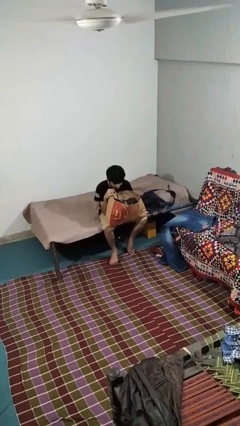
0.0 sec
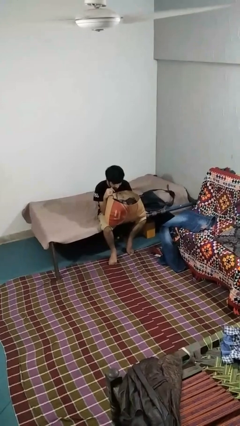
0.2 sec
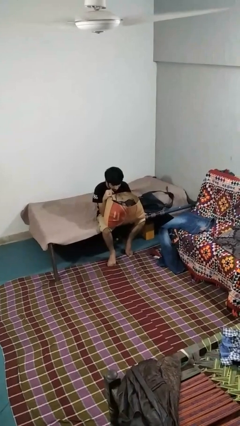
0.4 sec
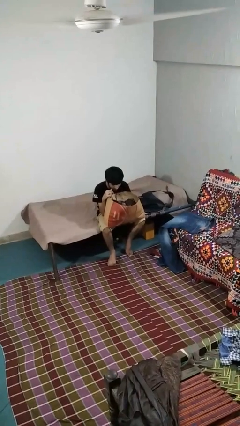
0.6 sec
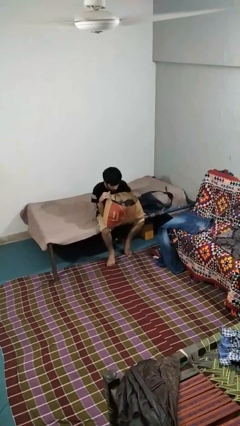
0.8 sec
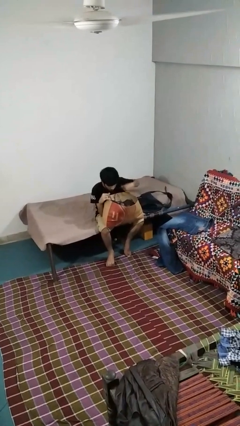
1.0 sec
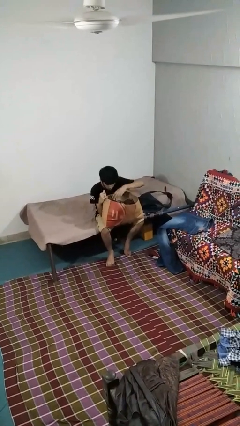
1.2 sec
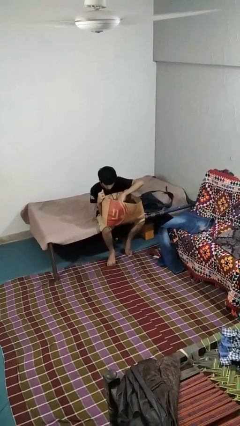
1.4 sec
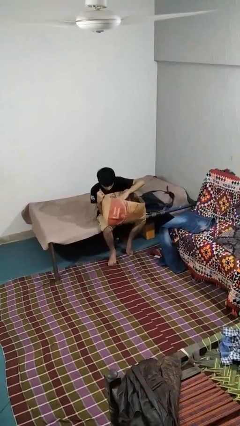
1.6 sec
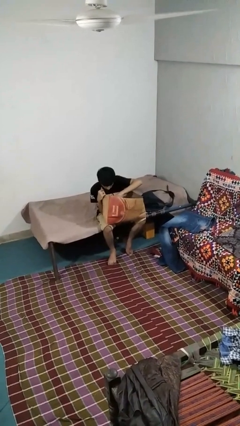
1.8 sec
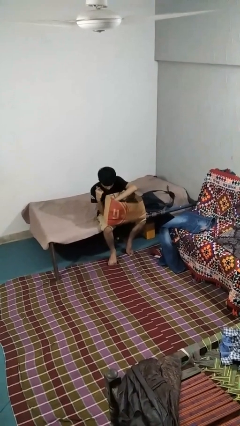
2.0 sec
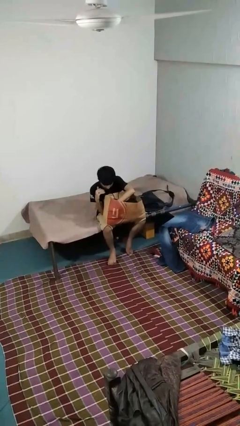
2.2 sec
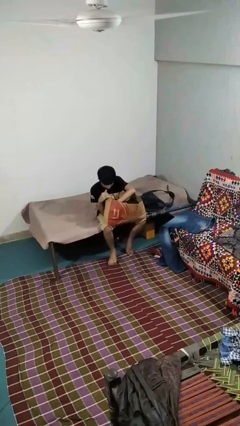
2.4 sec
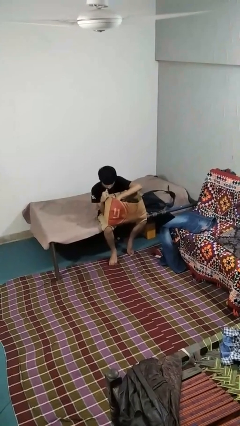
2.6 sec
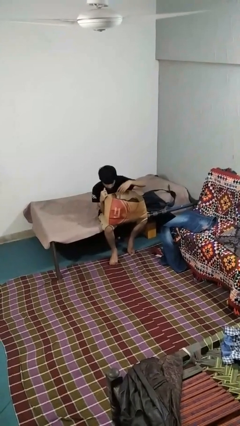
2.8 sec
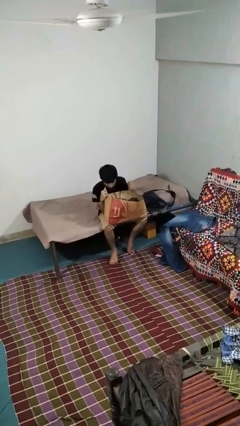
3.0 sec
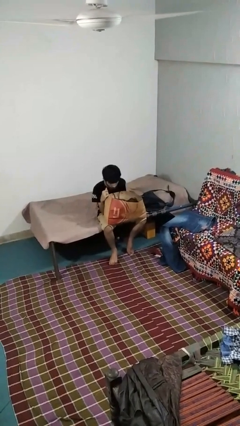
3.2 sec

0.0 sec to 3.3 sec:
person searches in bag

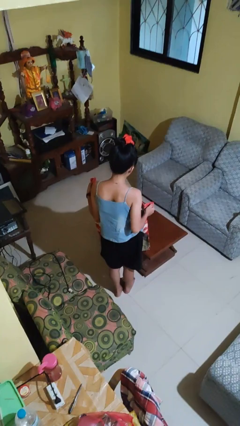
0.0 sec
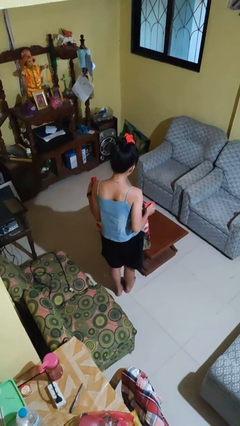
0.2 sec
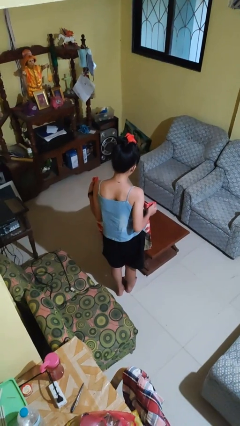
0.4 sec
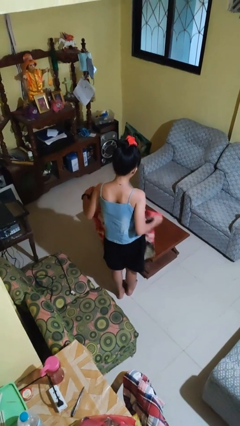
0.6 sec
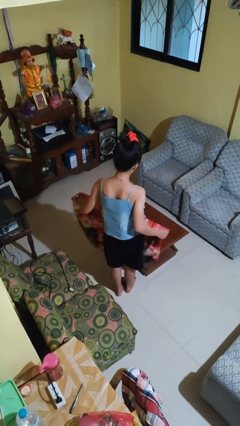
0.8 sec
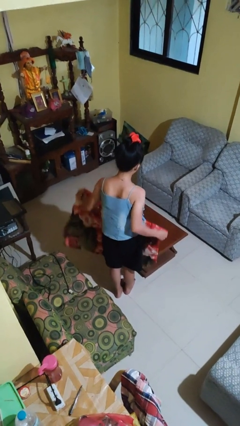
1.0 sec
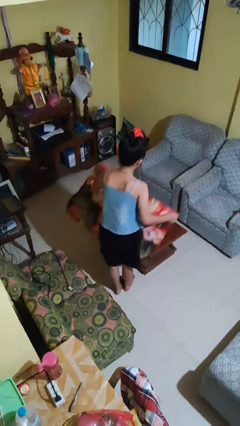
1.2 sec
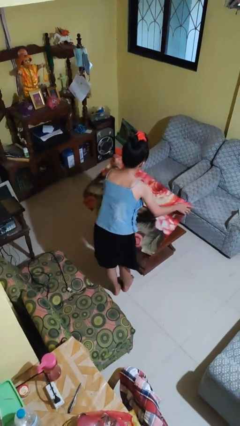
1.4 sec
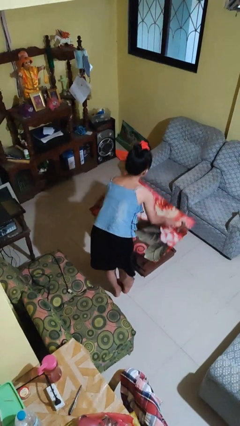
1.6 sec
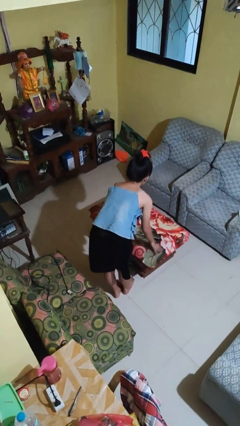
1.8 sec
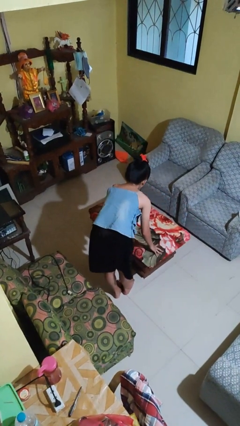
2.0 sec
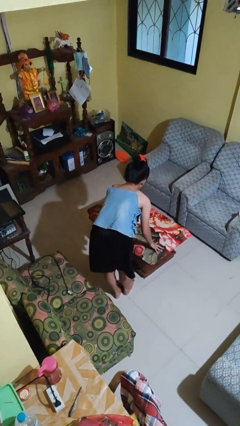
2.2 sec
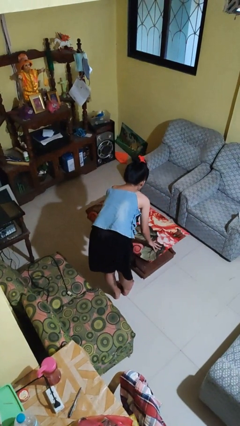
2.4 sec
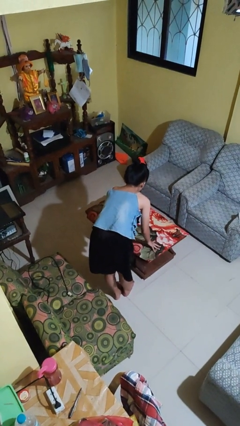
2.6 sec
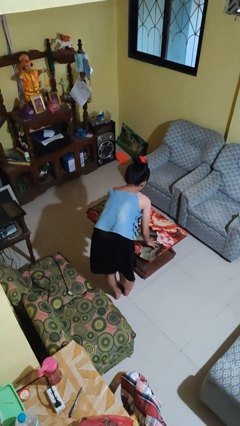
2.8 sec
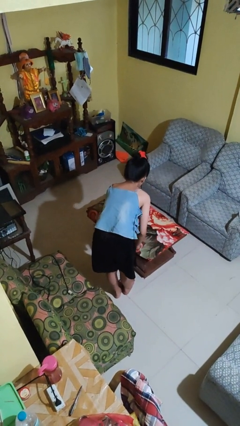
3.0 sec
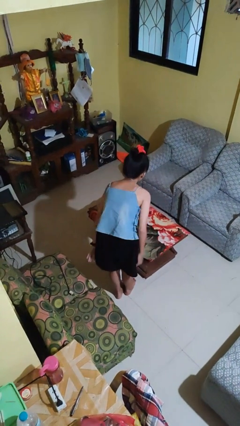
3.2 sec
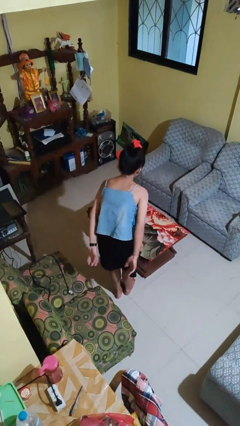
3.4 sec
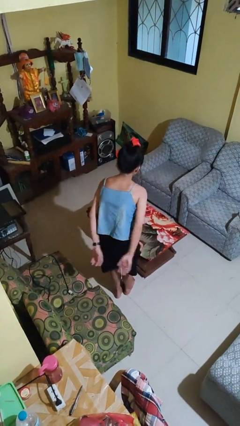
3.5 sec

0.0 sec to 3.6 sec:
person spreads tablecloth

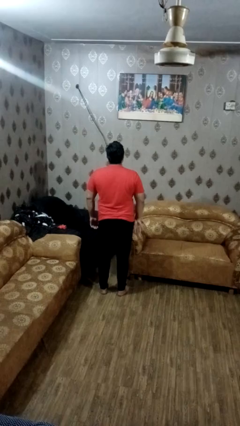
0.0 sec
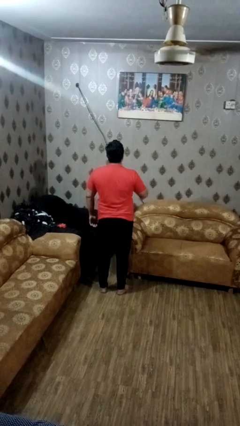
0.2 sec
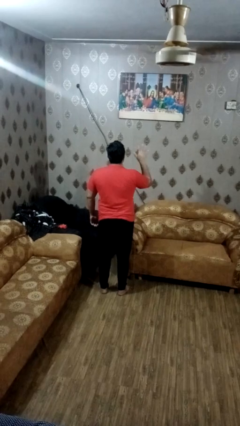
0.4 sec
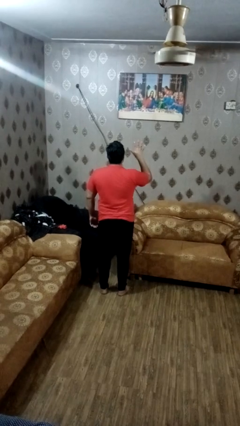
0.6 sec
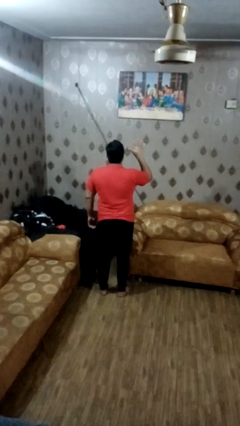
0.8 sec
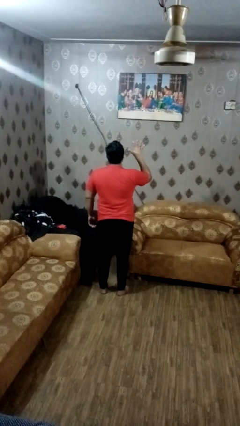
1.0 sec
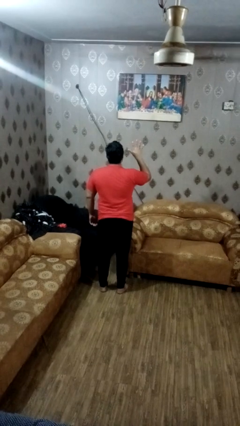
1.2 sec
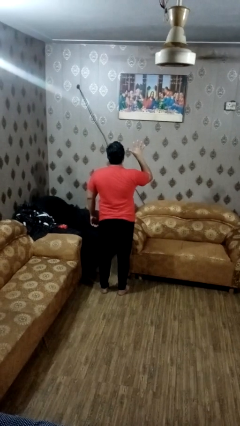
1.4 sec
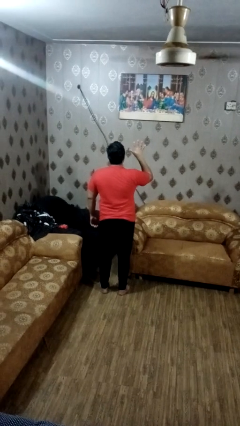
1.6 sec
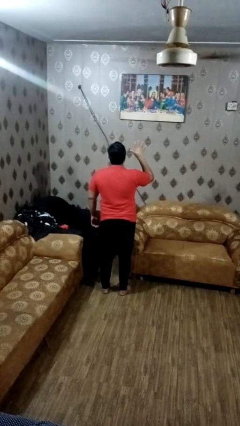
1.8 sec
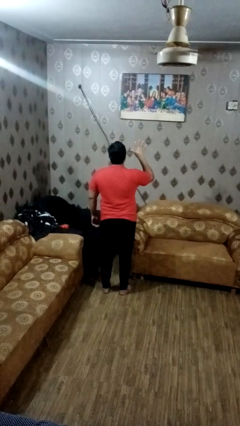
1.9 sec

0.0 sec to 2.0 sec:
person gestures number five

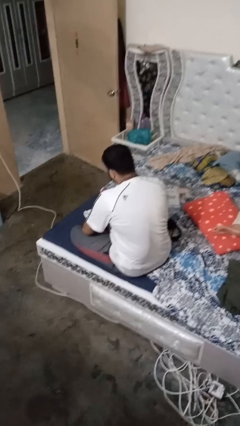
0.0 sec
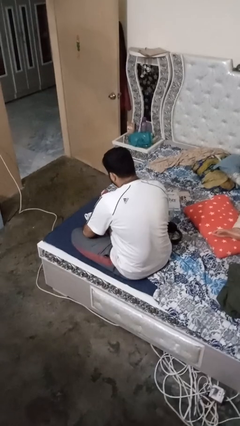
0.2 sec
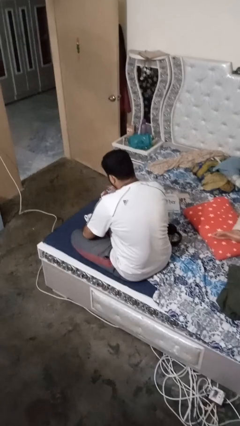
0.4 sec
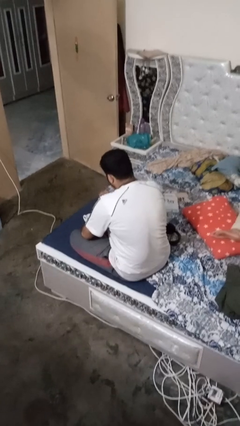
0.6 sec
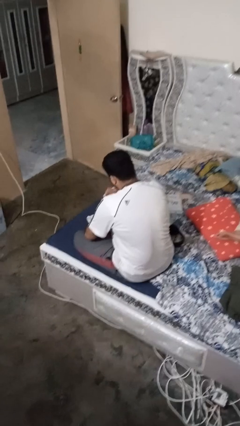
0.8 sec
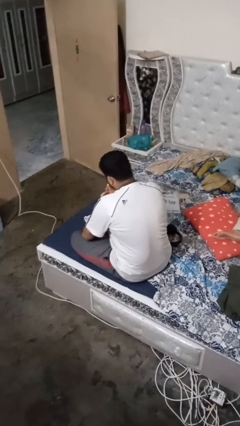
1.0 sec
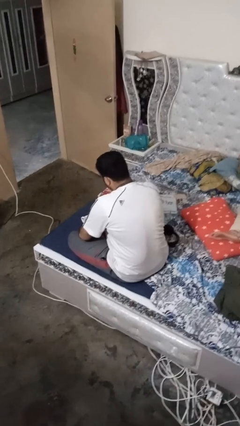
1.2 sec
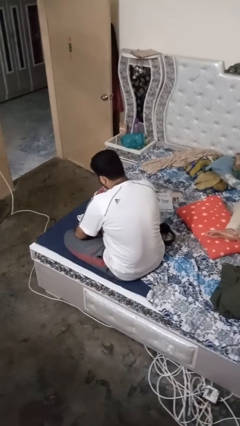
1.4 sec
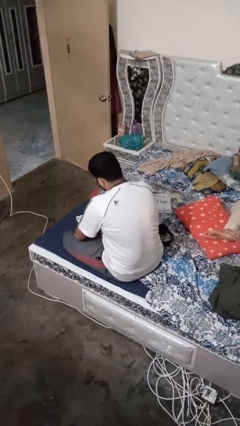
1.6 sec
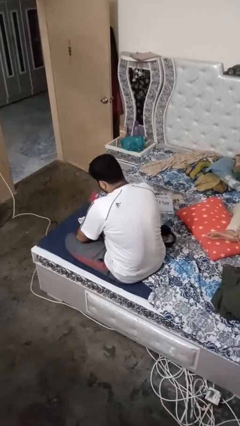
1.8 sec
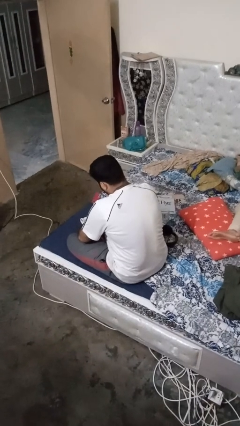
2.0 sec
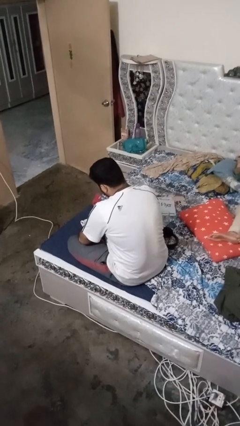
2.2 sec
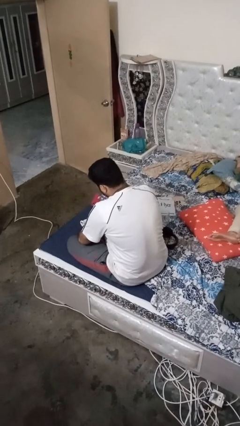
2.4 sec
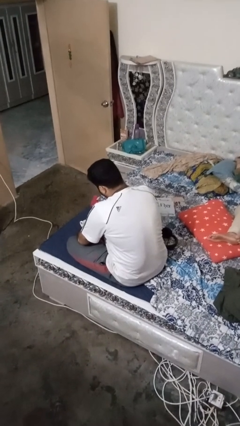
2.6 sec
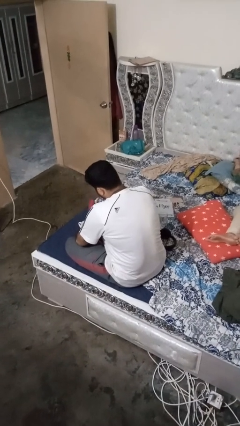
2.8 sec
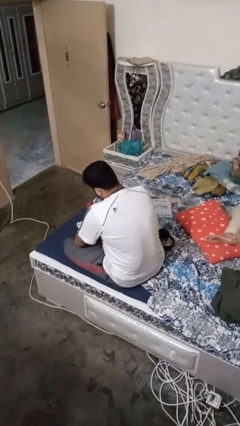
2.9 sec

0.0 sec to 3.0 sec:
person unscrews lid from bottle

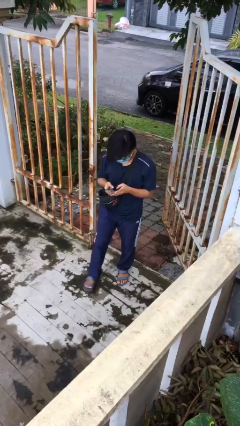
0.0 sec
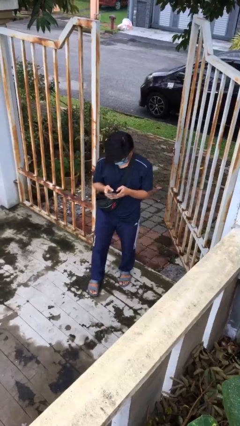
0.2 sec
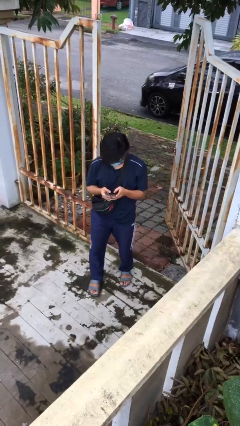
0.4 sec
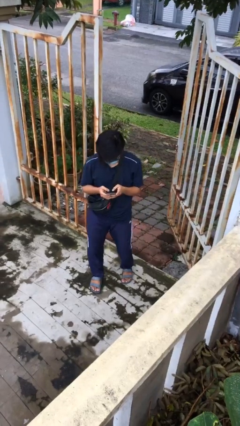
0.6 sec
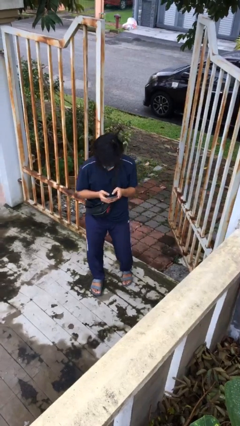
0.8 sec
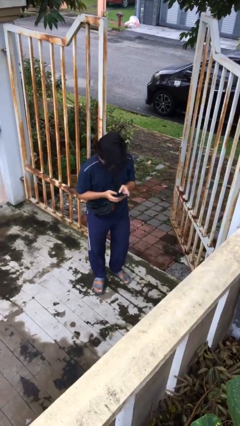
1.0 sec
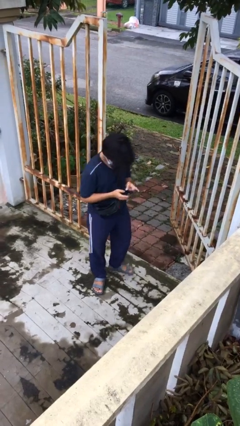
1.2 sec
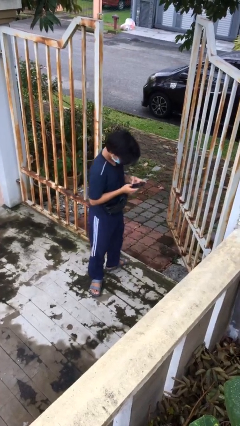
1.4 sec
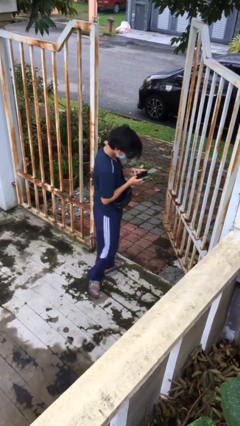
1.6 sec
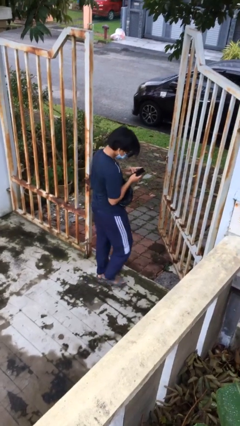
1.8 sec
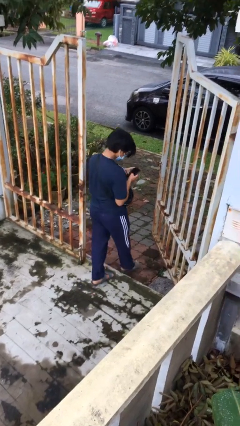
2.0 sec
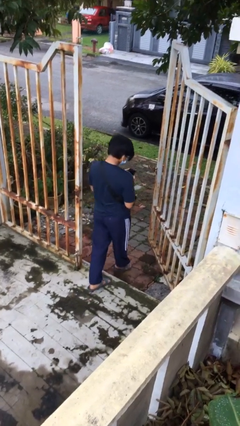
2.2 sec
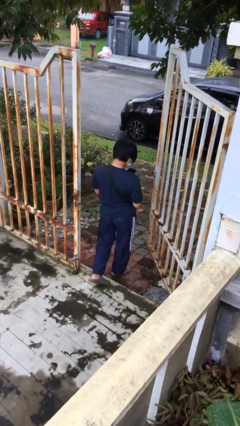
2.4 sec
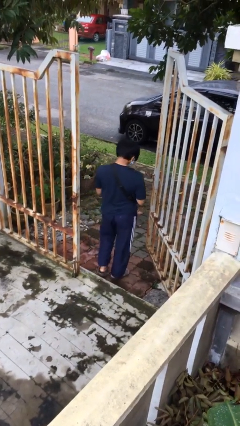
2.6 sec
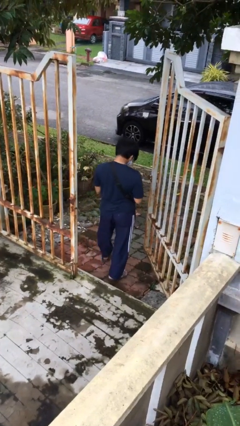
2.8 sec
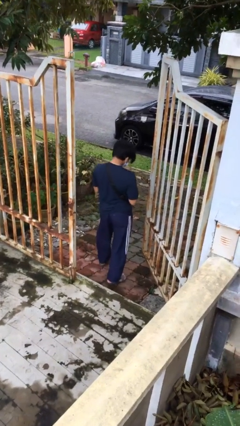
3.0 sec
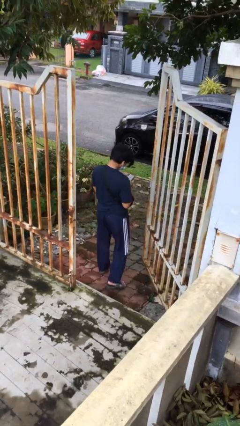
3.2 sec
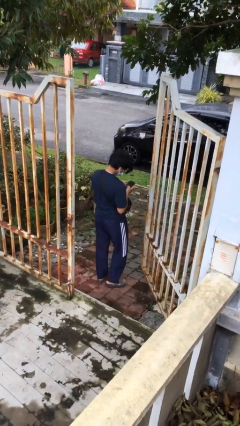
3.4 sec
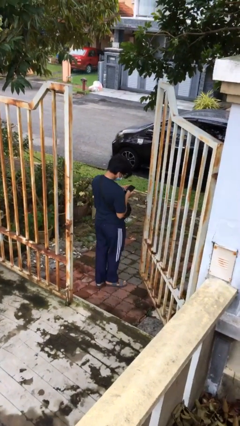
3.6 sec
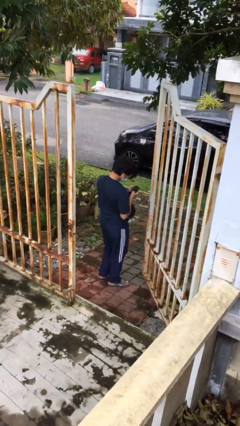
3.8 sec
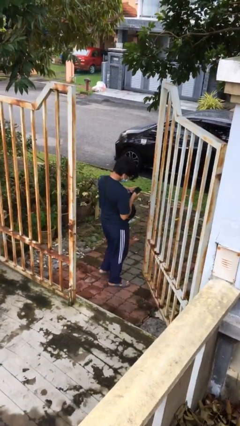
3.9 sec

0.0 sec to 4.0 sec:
person exits scene through structure

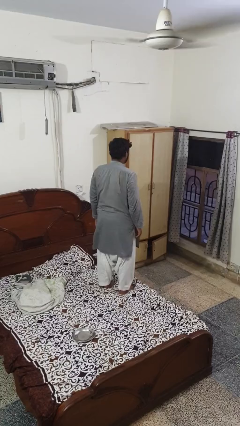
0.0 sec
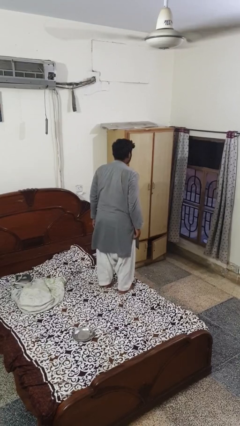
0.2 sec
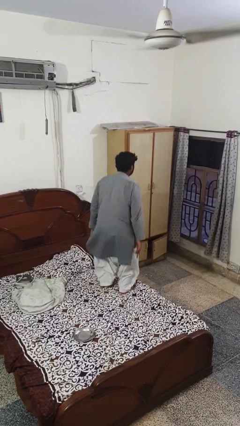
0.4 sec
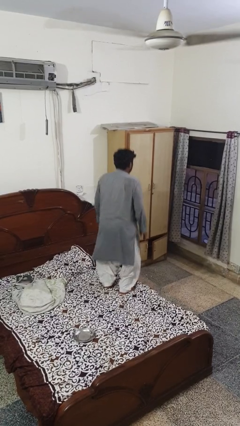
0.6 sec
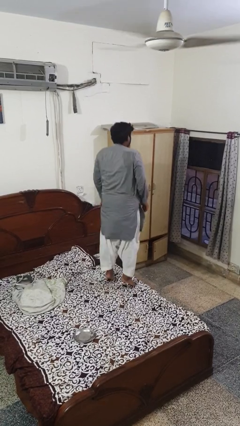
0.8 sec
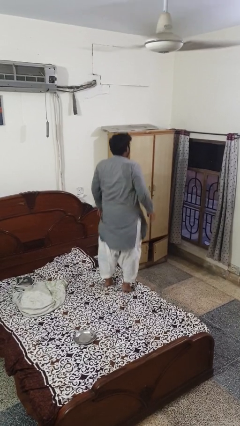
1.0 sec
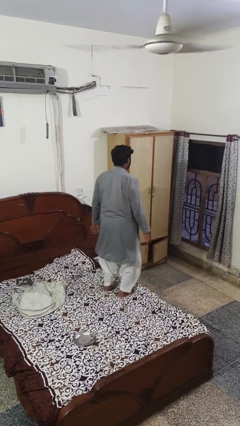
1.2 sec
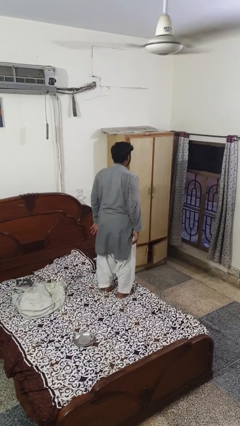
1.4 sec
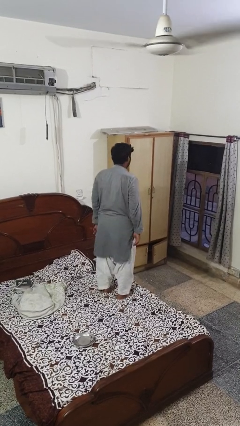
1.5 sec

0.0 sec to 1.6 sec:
person jumps on bed

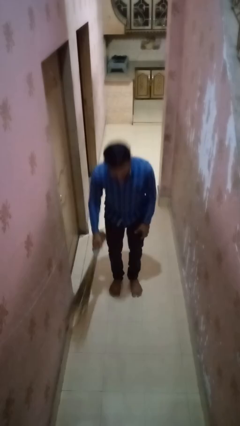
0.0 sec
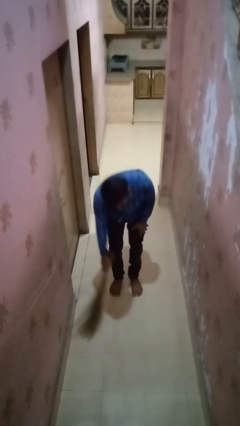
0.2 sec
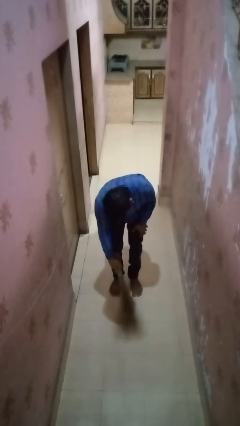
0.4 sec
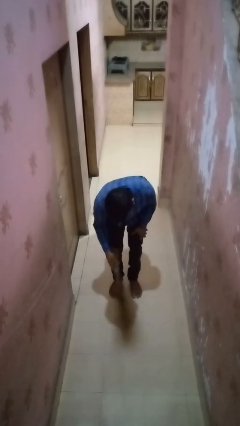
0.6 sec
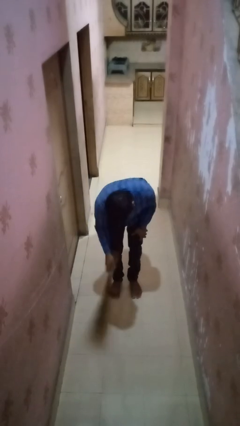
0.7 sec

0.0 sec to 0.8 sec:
person sweeps floor
